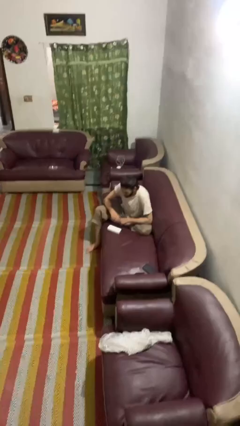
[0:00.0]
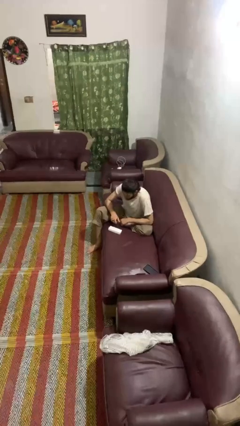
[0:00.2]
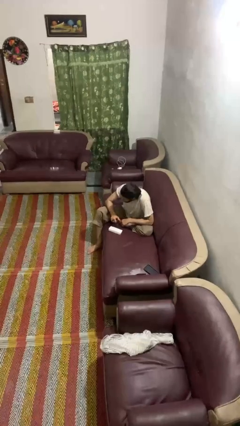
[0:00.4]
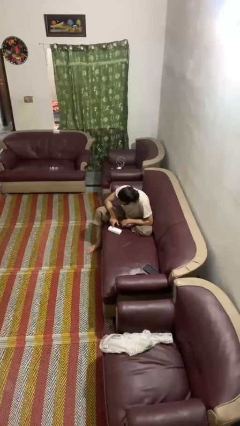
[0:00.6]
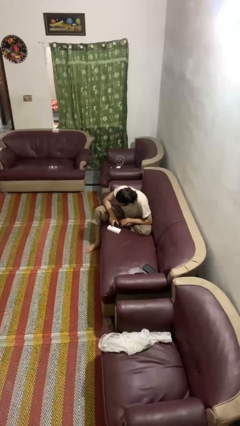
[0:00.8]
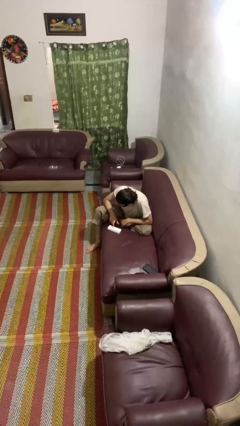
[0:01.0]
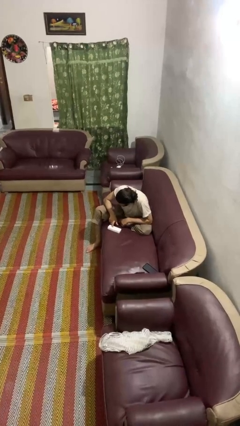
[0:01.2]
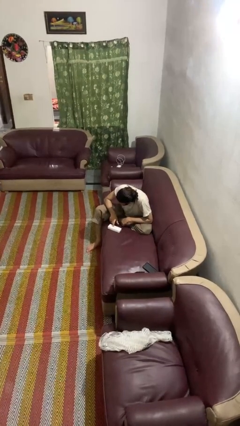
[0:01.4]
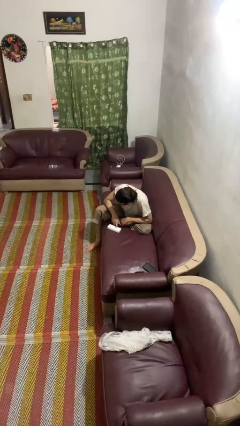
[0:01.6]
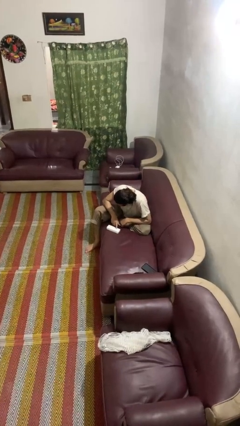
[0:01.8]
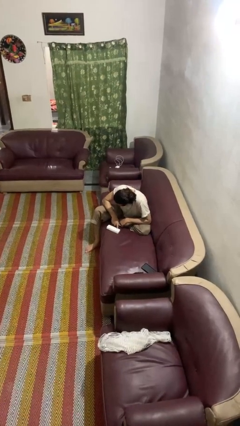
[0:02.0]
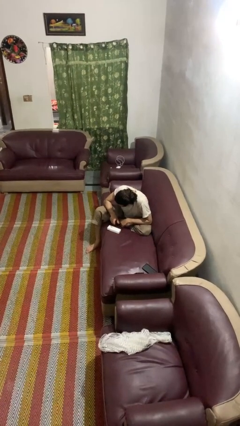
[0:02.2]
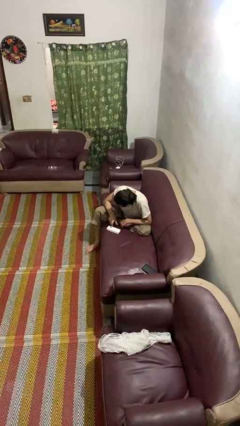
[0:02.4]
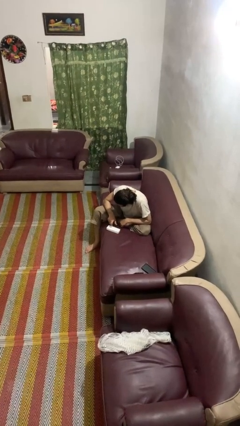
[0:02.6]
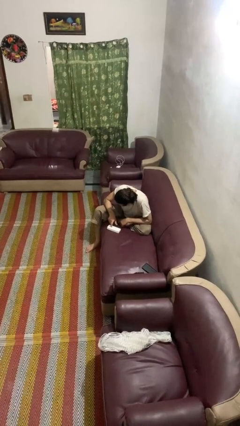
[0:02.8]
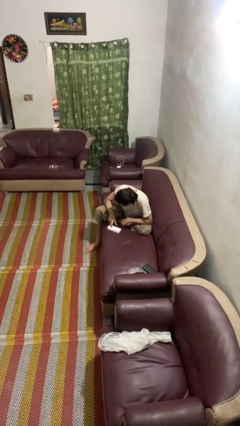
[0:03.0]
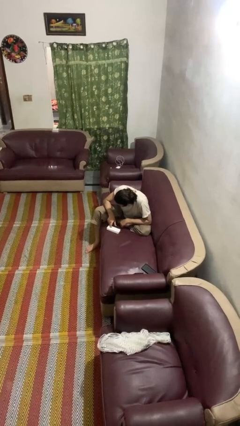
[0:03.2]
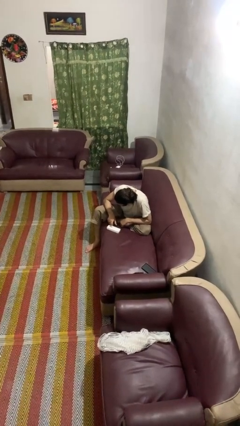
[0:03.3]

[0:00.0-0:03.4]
person taps object with finger

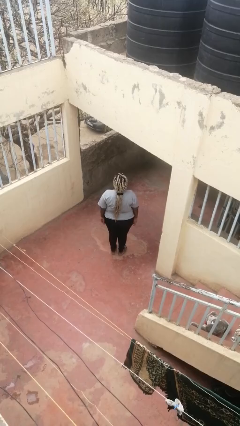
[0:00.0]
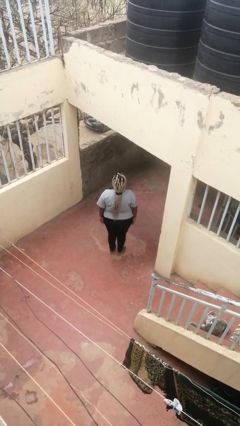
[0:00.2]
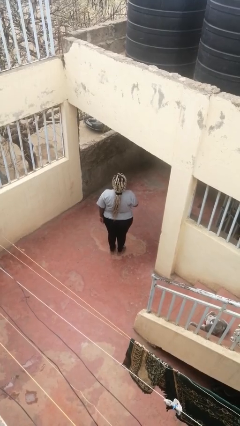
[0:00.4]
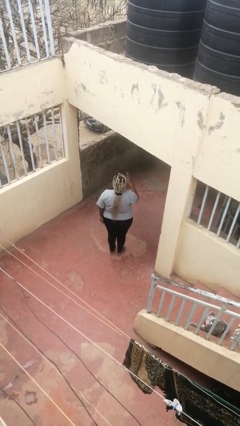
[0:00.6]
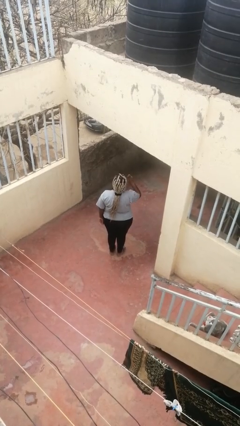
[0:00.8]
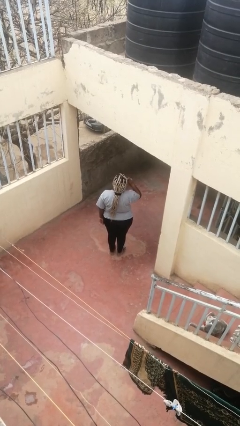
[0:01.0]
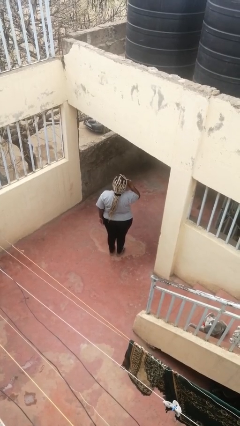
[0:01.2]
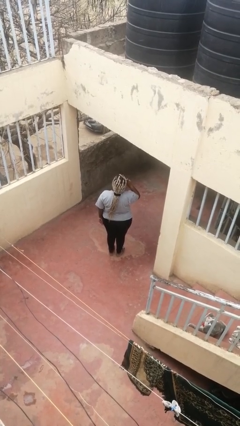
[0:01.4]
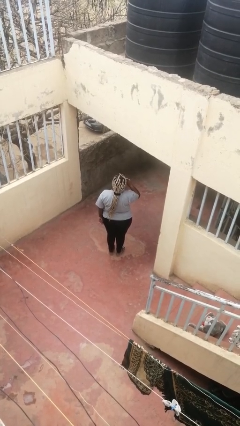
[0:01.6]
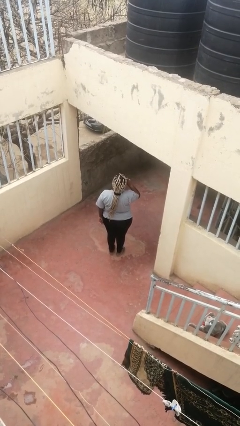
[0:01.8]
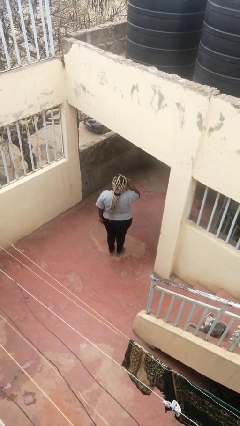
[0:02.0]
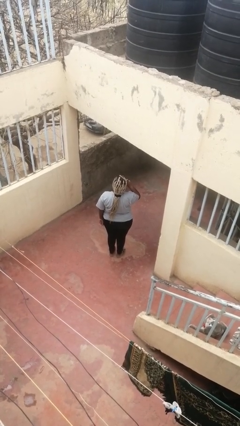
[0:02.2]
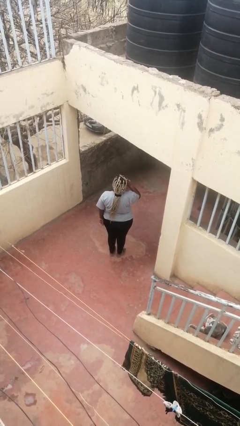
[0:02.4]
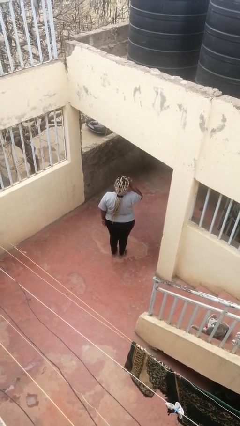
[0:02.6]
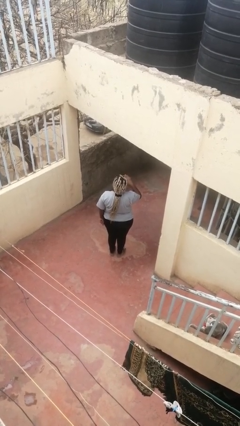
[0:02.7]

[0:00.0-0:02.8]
person salutes

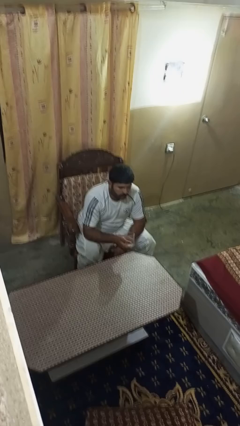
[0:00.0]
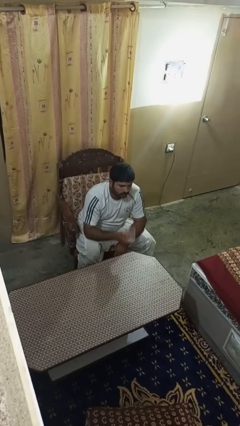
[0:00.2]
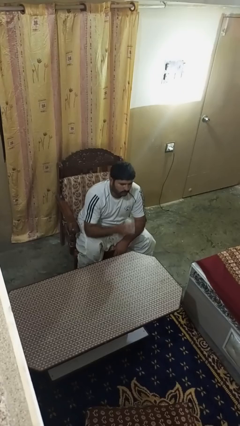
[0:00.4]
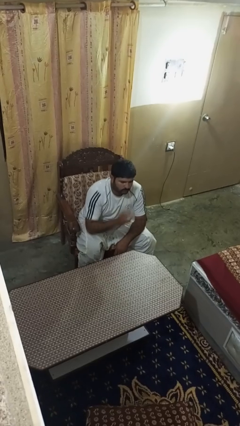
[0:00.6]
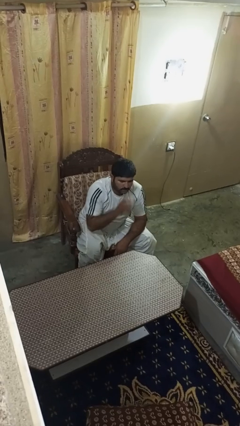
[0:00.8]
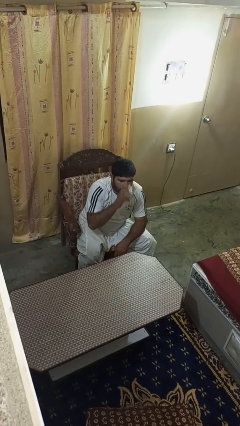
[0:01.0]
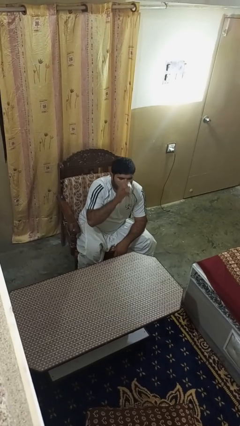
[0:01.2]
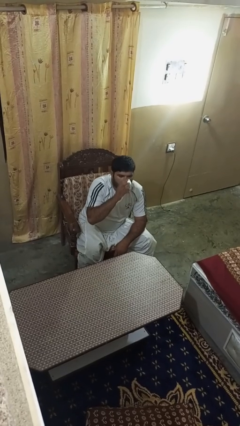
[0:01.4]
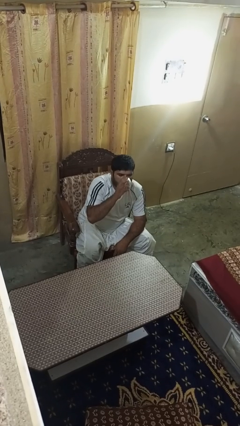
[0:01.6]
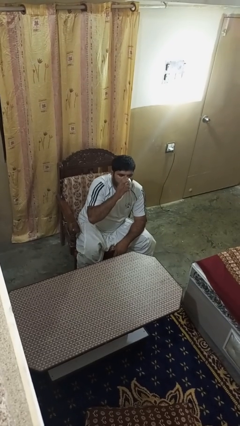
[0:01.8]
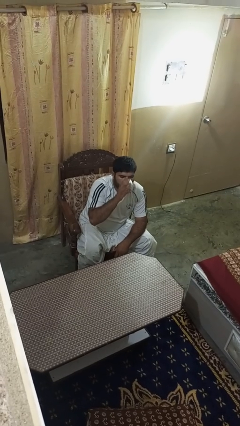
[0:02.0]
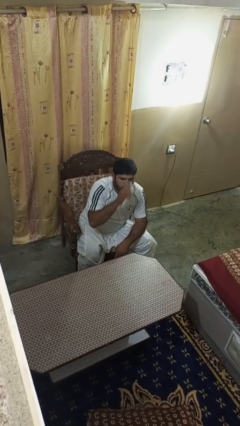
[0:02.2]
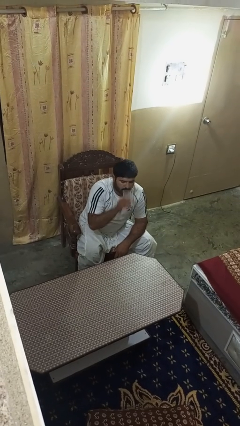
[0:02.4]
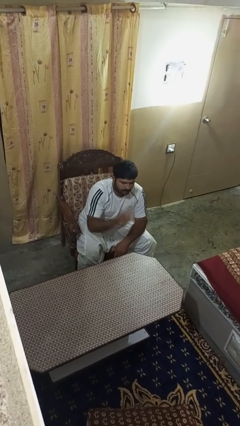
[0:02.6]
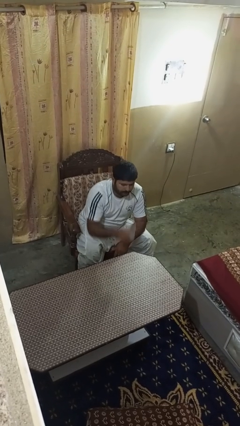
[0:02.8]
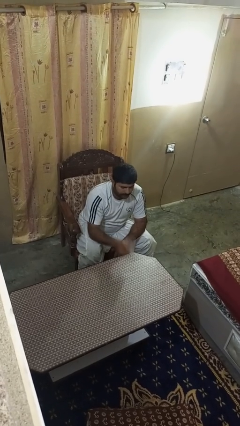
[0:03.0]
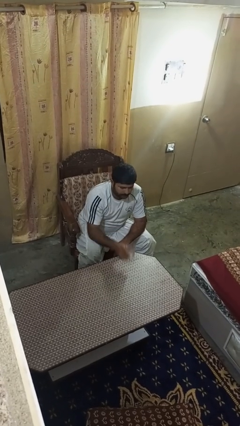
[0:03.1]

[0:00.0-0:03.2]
person drinks from shotglass

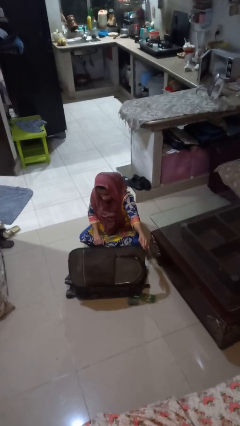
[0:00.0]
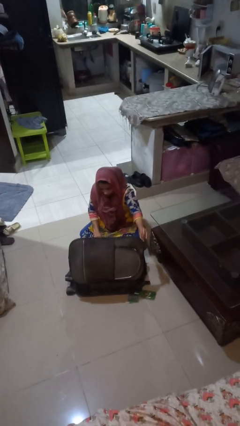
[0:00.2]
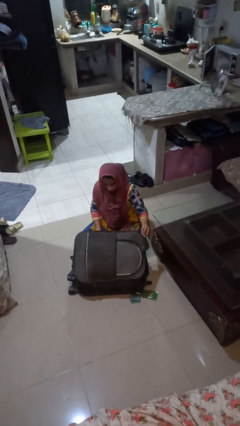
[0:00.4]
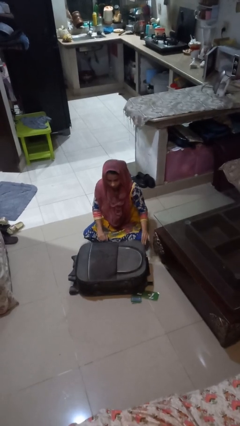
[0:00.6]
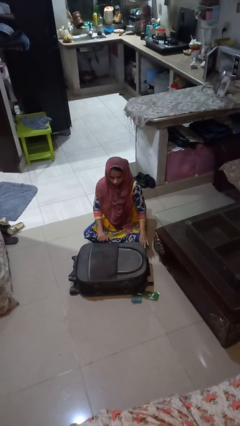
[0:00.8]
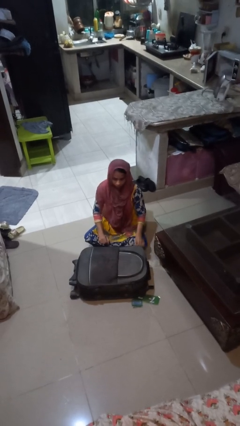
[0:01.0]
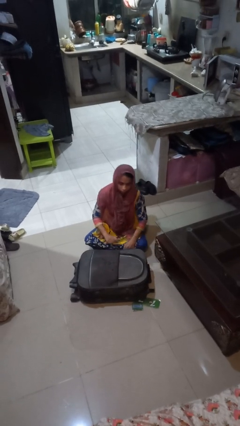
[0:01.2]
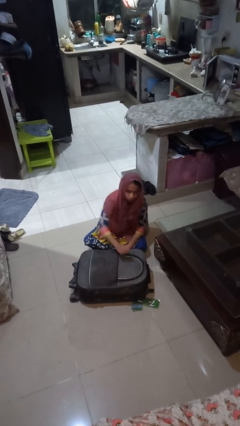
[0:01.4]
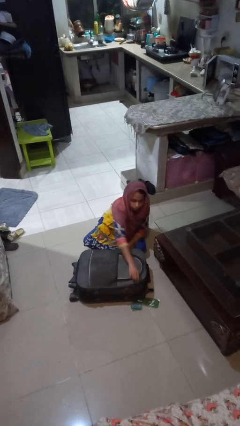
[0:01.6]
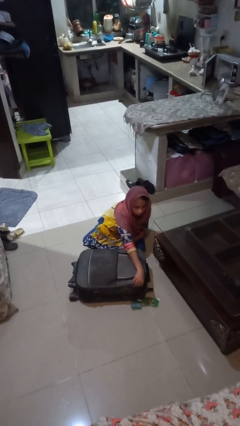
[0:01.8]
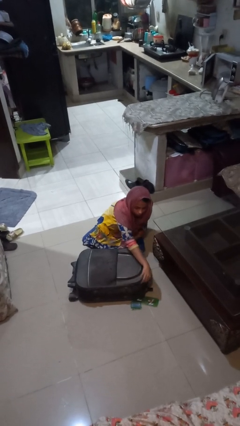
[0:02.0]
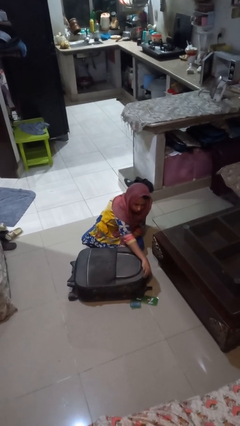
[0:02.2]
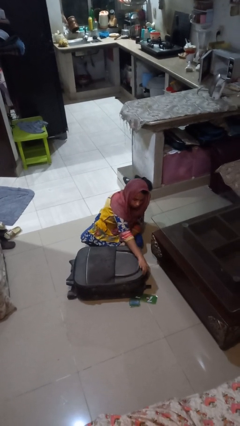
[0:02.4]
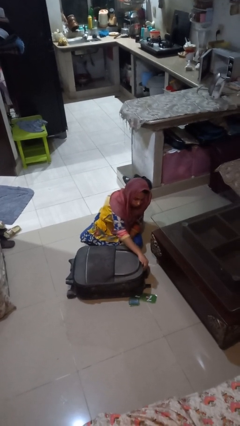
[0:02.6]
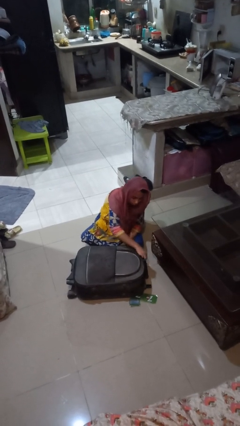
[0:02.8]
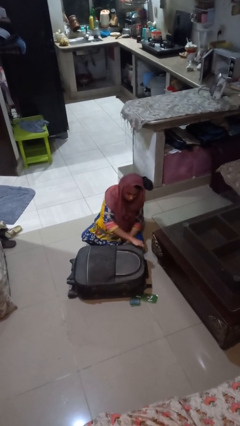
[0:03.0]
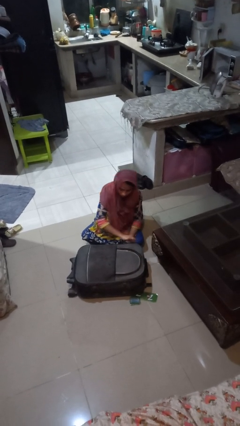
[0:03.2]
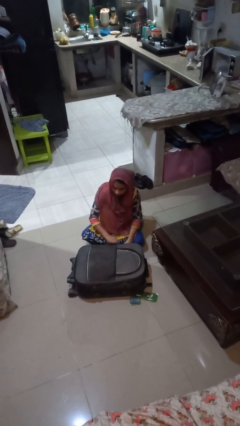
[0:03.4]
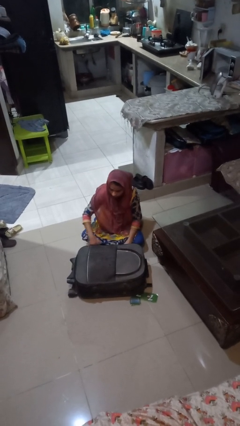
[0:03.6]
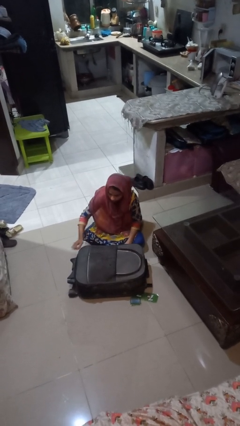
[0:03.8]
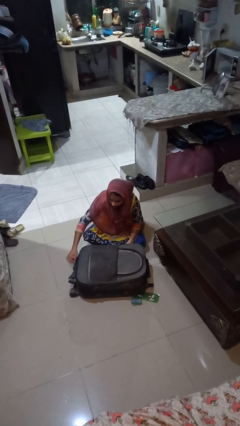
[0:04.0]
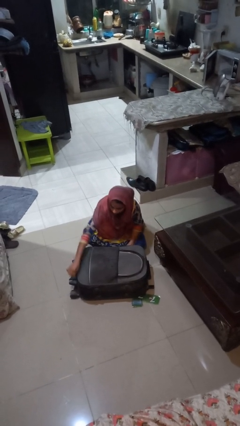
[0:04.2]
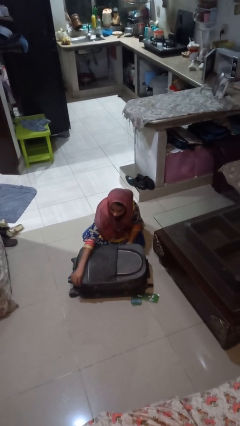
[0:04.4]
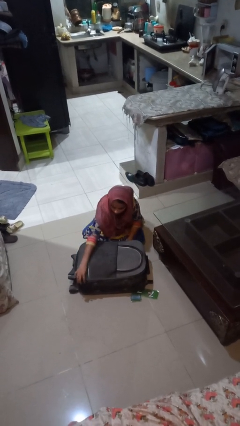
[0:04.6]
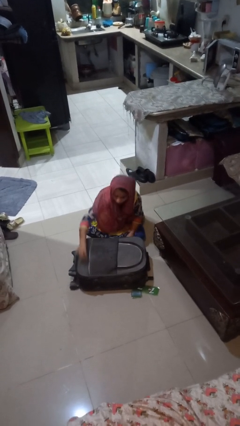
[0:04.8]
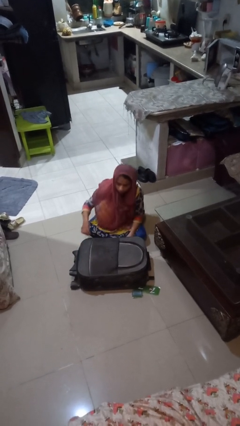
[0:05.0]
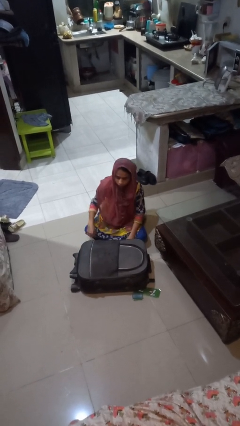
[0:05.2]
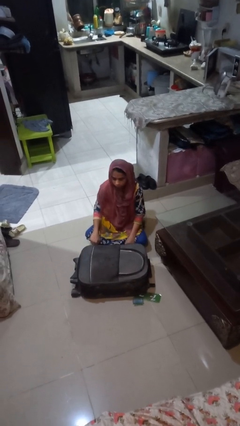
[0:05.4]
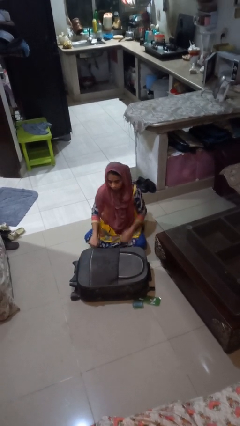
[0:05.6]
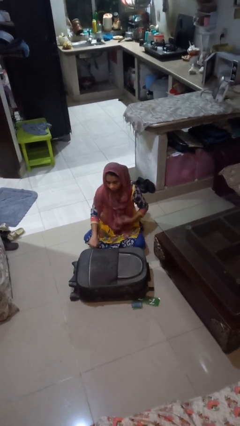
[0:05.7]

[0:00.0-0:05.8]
person closes suitcase

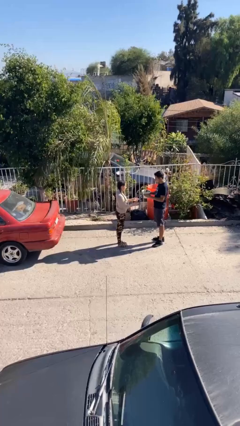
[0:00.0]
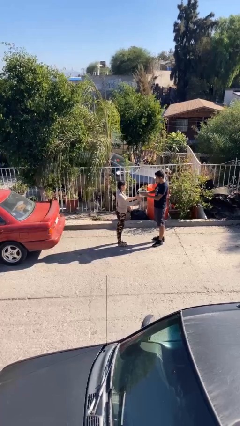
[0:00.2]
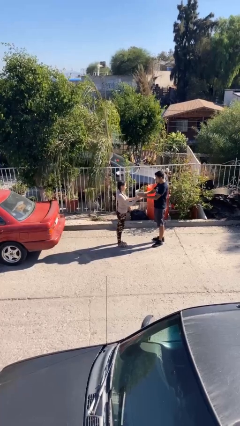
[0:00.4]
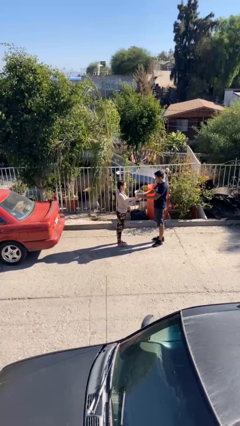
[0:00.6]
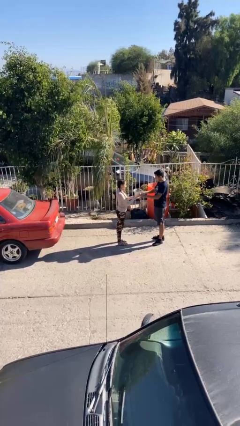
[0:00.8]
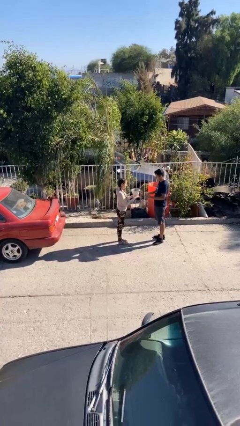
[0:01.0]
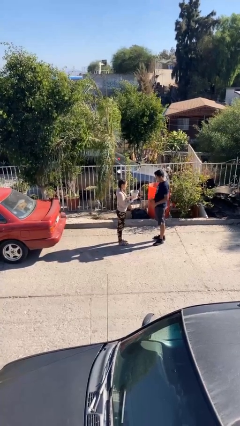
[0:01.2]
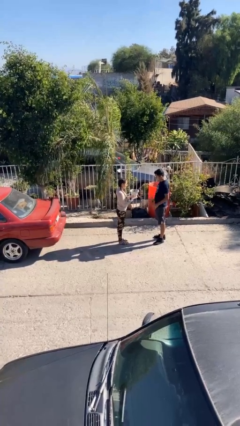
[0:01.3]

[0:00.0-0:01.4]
person transfers object to person

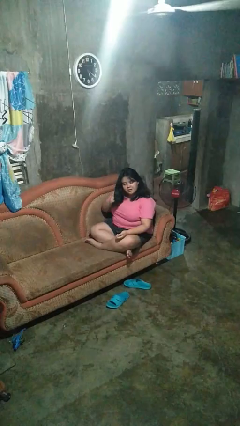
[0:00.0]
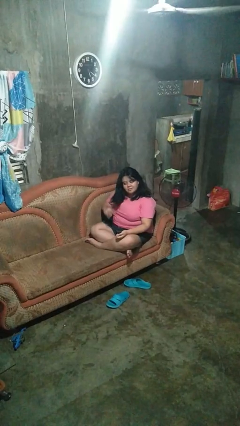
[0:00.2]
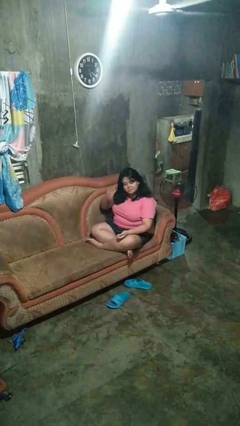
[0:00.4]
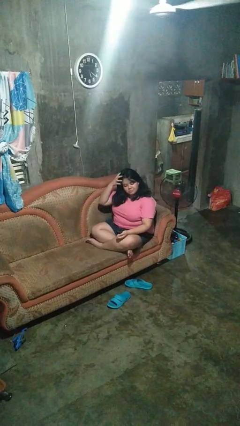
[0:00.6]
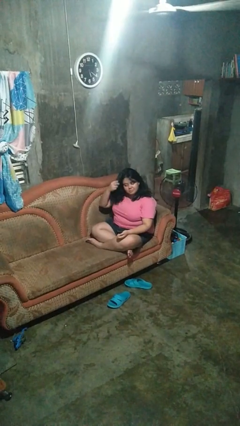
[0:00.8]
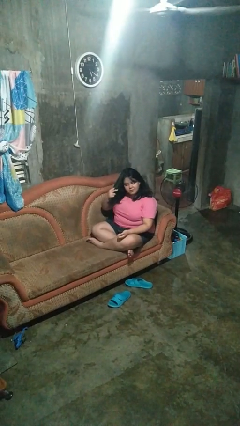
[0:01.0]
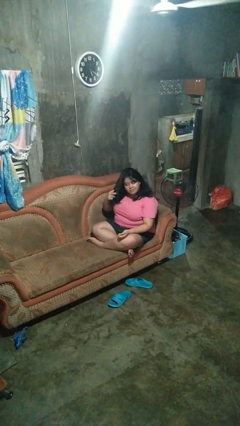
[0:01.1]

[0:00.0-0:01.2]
person strokes hair
